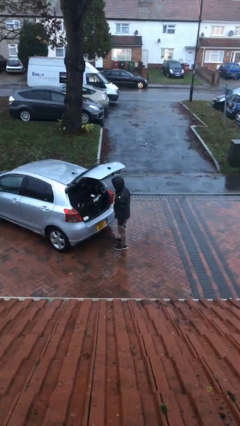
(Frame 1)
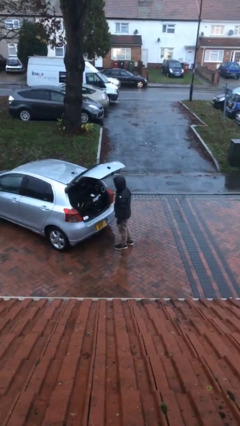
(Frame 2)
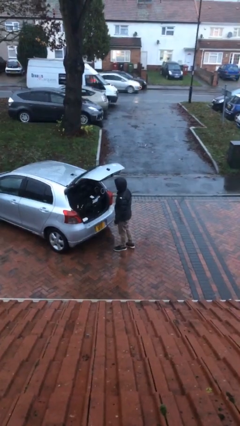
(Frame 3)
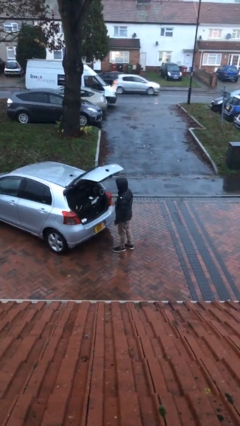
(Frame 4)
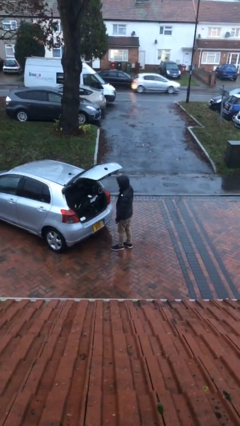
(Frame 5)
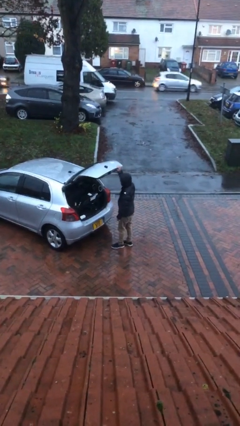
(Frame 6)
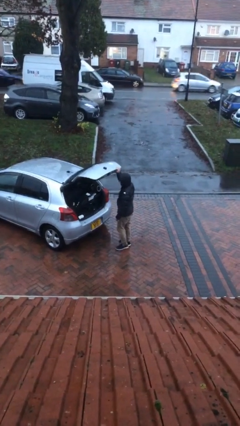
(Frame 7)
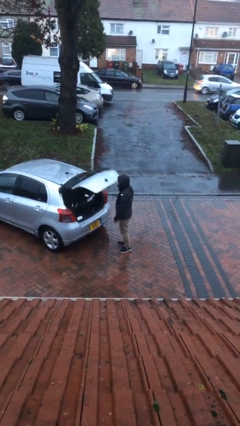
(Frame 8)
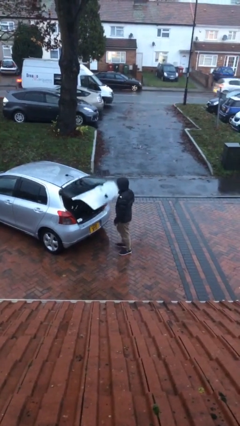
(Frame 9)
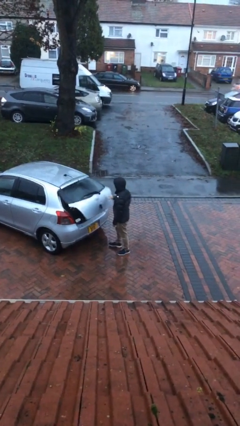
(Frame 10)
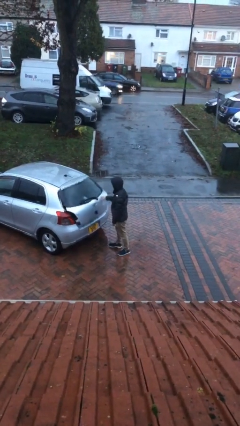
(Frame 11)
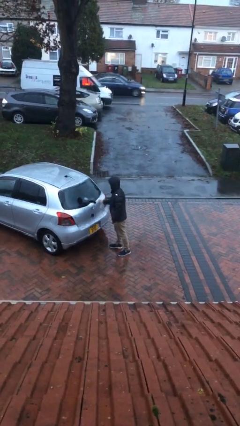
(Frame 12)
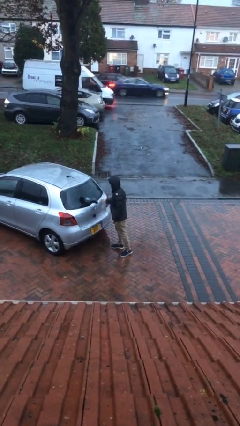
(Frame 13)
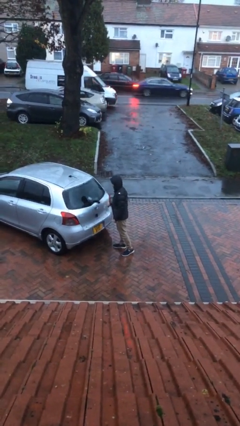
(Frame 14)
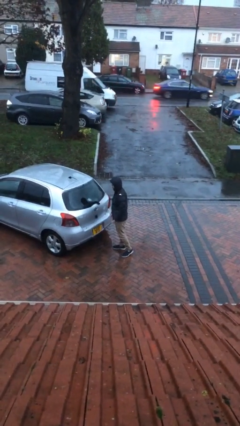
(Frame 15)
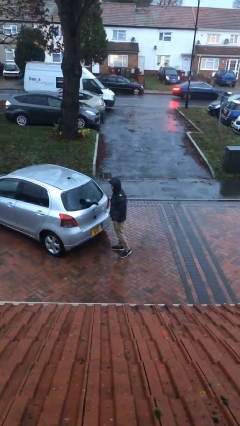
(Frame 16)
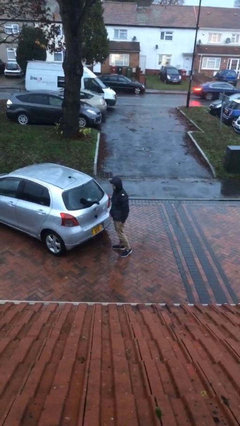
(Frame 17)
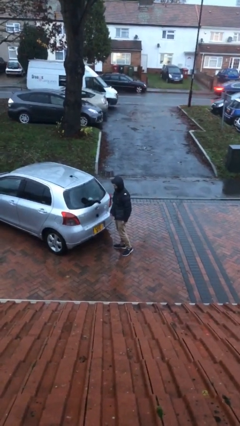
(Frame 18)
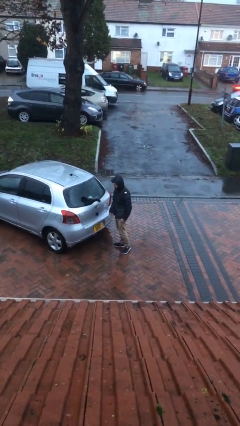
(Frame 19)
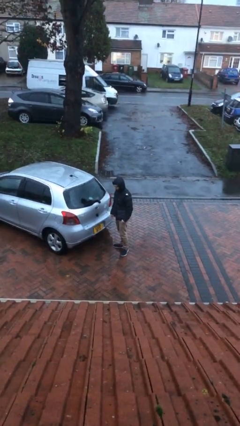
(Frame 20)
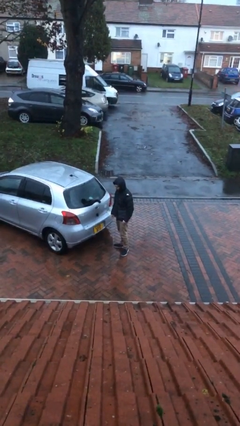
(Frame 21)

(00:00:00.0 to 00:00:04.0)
person closes car trunk

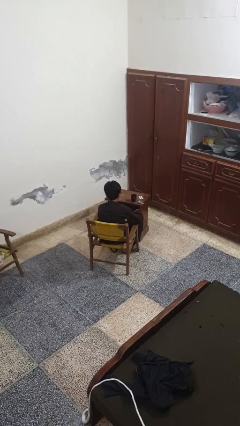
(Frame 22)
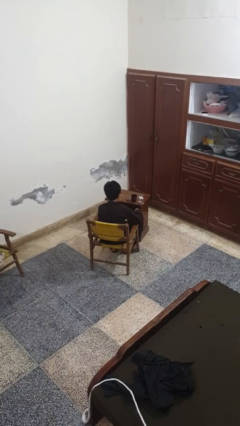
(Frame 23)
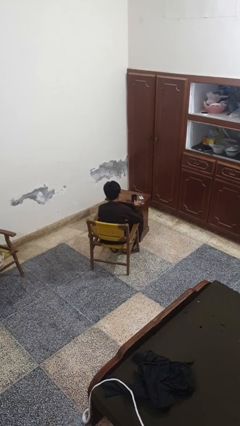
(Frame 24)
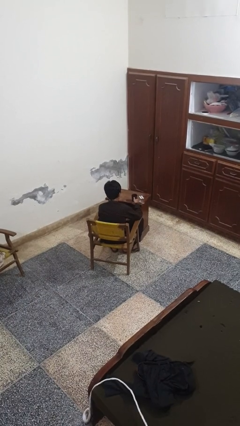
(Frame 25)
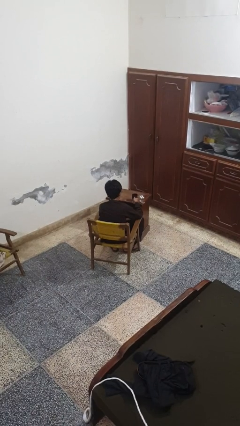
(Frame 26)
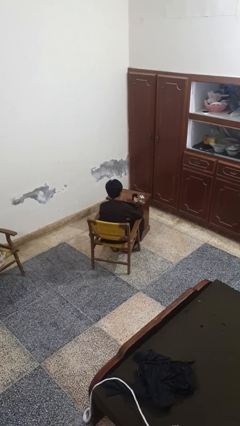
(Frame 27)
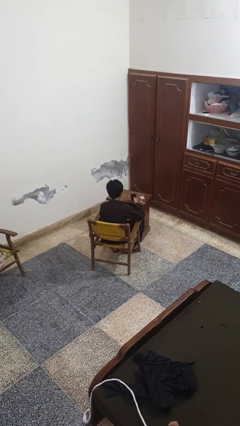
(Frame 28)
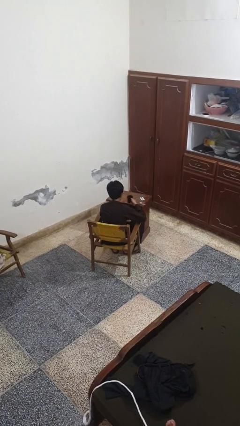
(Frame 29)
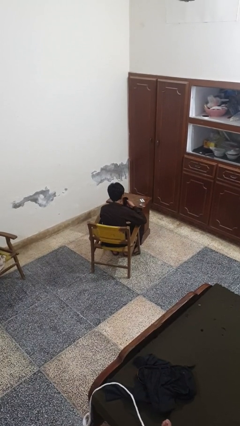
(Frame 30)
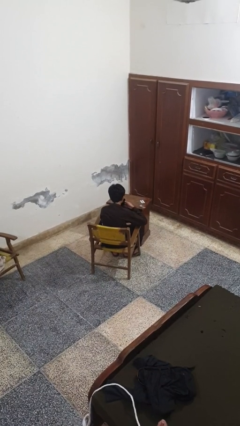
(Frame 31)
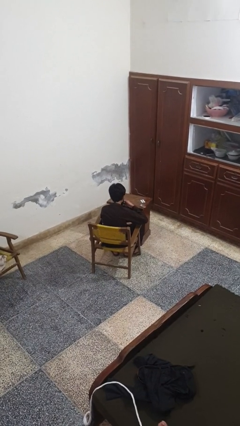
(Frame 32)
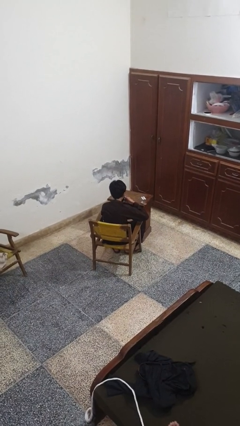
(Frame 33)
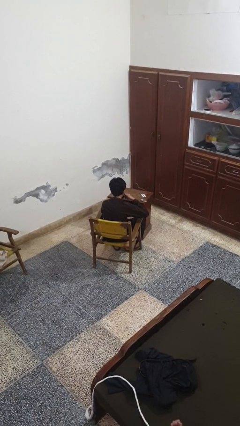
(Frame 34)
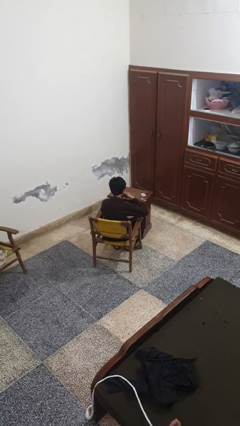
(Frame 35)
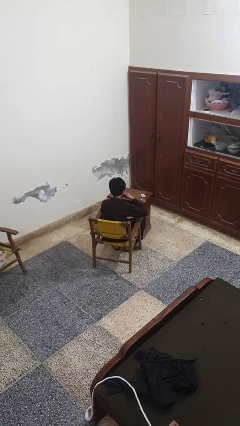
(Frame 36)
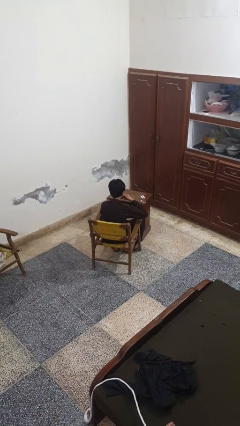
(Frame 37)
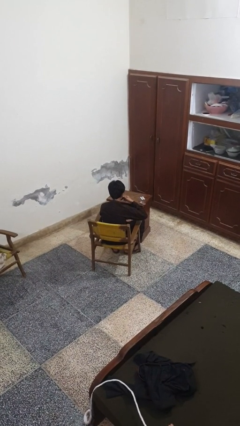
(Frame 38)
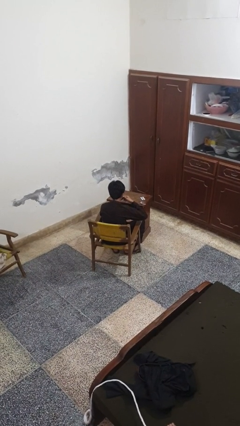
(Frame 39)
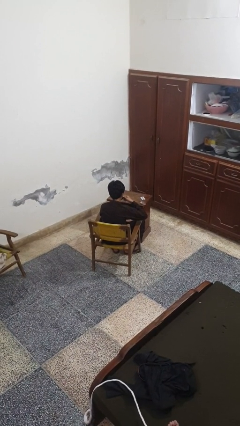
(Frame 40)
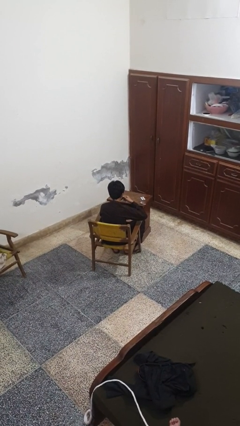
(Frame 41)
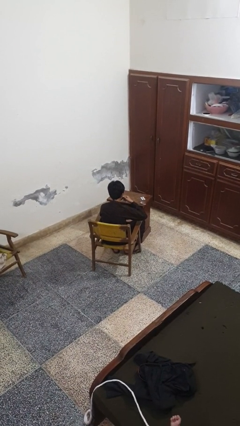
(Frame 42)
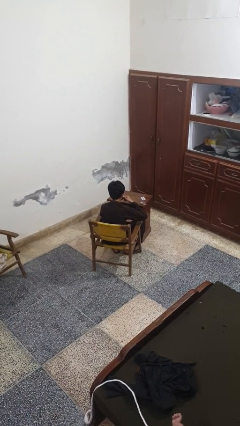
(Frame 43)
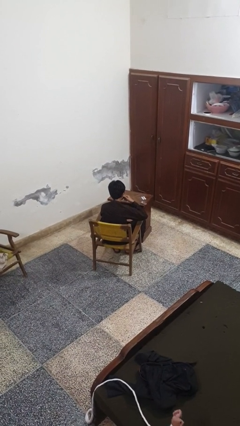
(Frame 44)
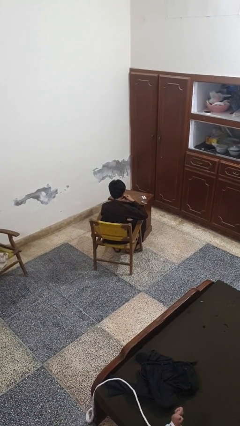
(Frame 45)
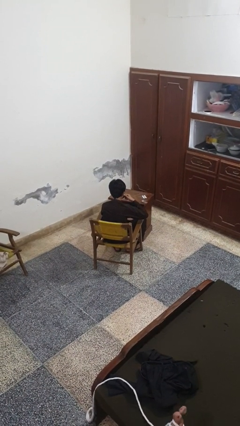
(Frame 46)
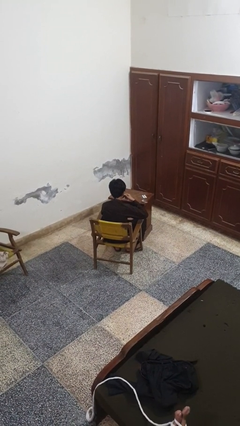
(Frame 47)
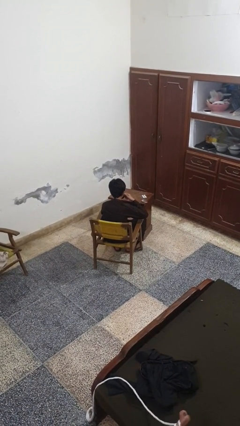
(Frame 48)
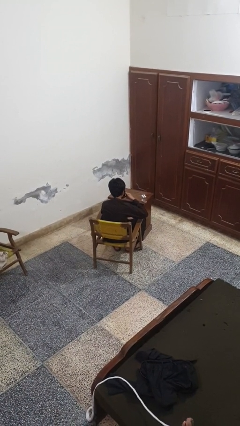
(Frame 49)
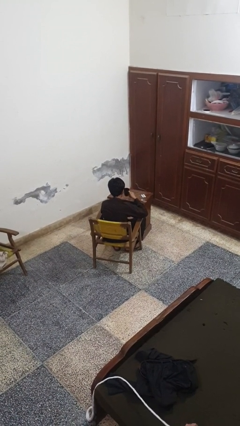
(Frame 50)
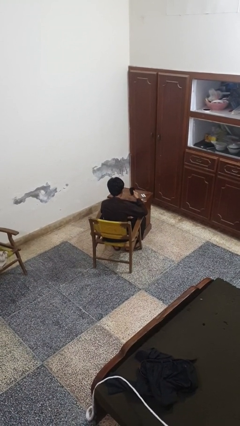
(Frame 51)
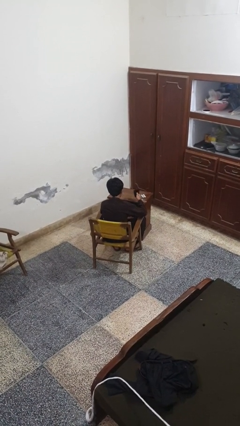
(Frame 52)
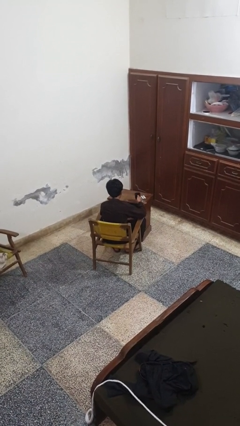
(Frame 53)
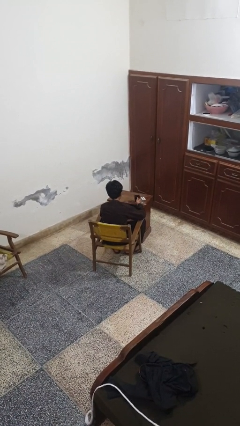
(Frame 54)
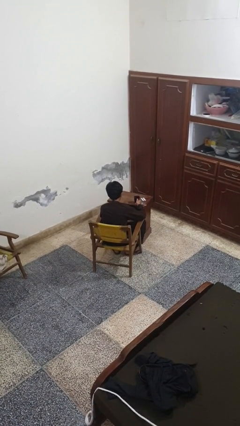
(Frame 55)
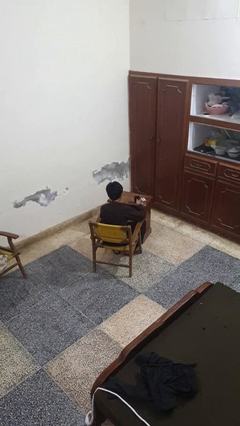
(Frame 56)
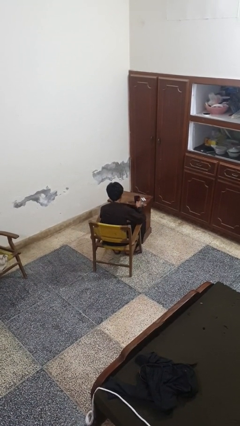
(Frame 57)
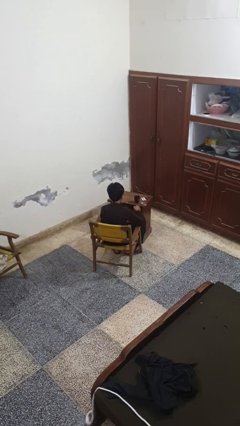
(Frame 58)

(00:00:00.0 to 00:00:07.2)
person drinks from cup

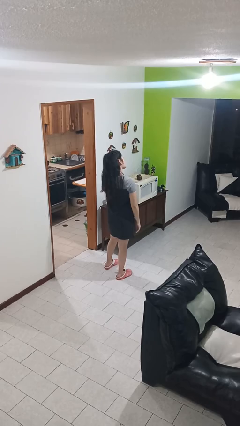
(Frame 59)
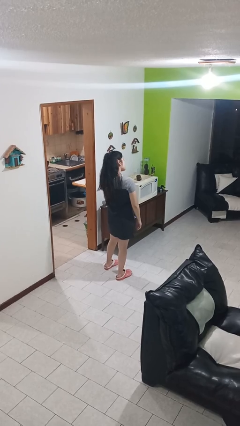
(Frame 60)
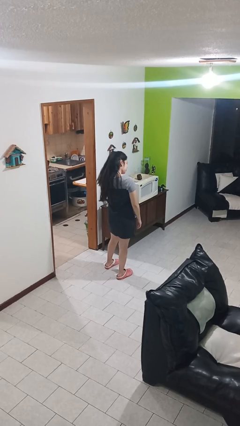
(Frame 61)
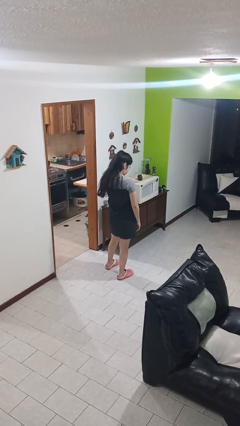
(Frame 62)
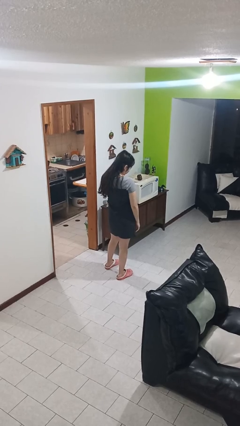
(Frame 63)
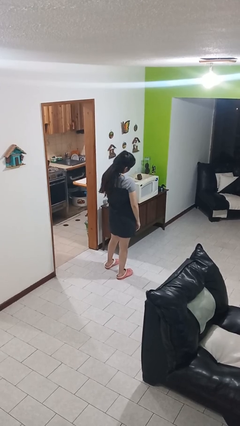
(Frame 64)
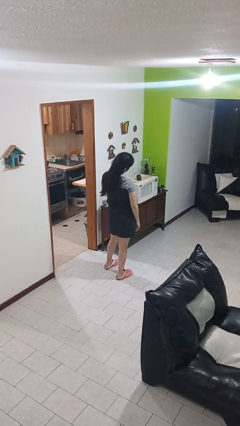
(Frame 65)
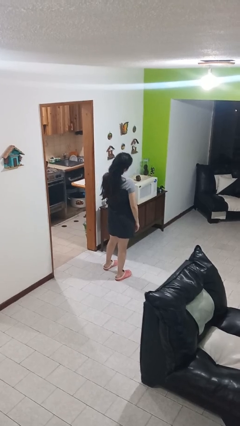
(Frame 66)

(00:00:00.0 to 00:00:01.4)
person rubs neck

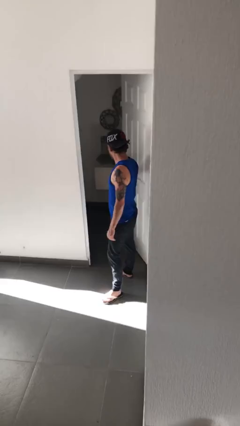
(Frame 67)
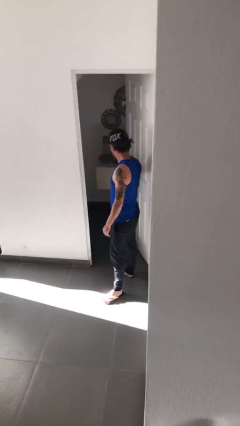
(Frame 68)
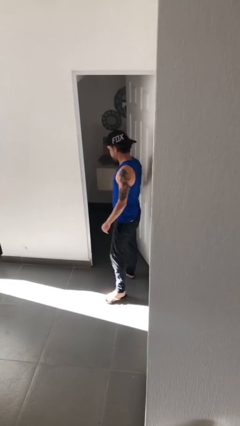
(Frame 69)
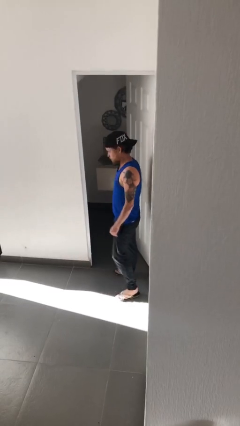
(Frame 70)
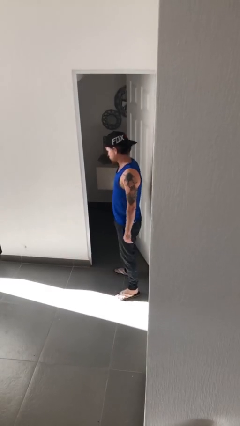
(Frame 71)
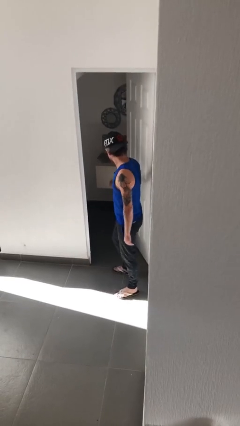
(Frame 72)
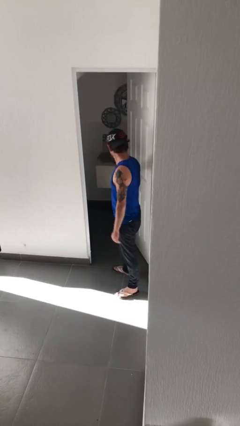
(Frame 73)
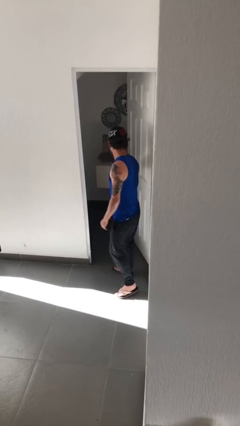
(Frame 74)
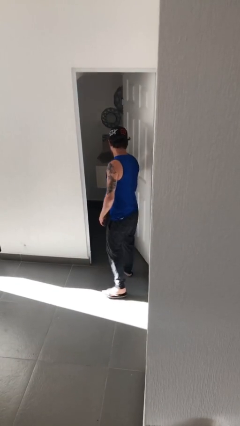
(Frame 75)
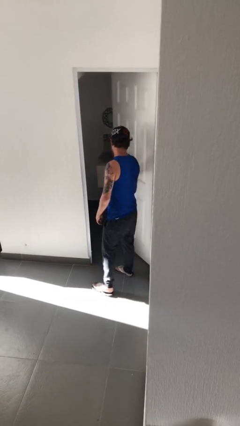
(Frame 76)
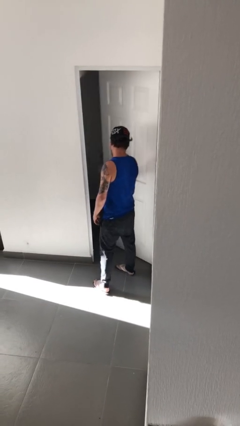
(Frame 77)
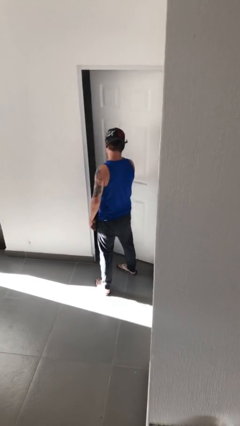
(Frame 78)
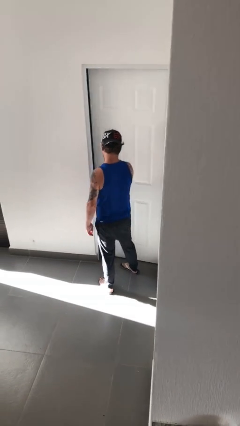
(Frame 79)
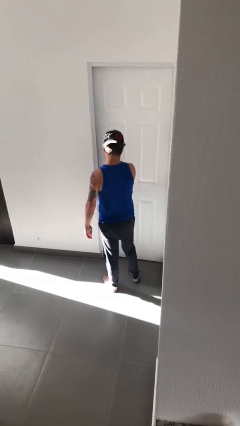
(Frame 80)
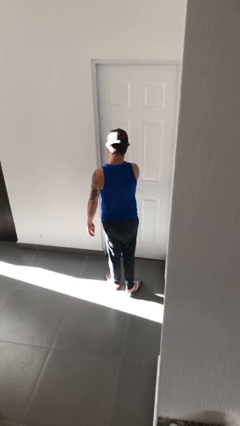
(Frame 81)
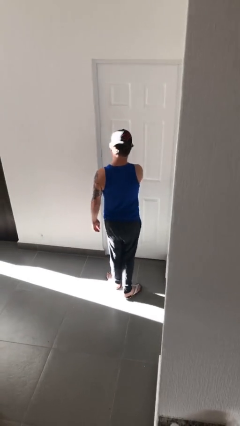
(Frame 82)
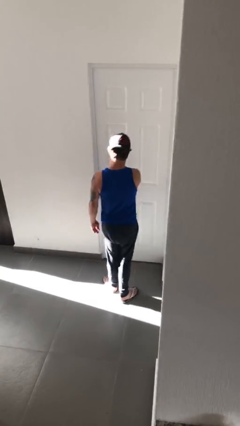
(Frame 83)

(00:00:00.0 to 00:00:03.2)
person closes facility door

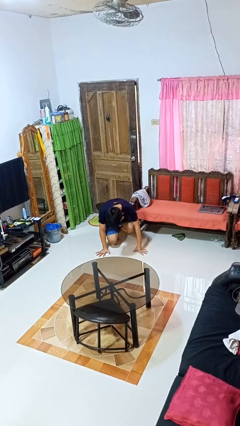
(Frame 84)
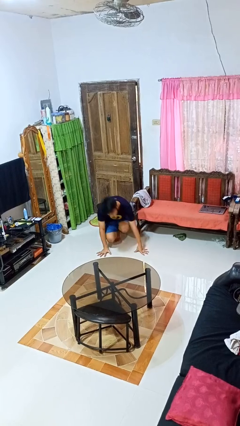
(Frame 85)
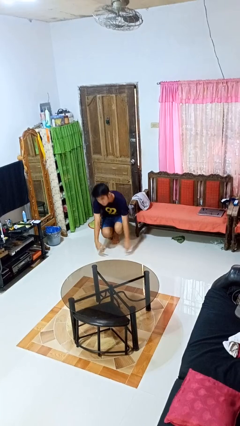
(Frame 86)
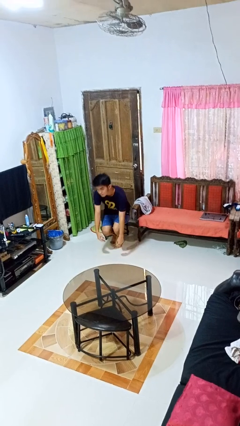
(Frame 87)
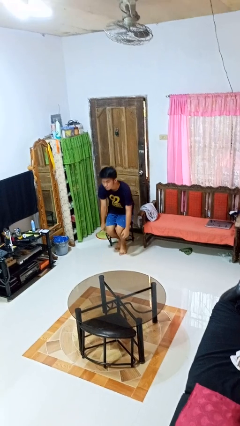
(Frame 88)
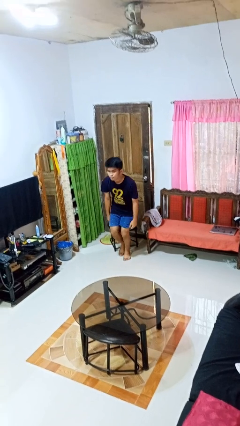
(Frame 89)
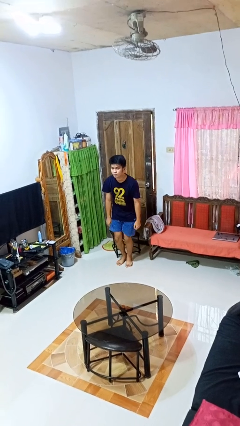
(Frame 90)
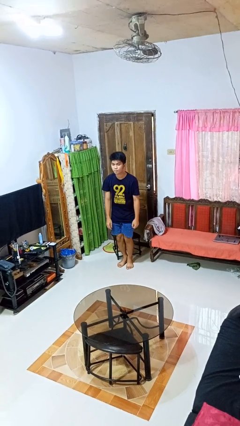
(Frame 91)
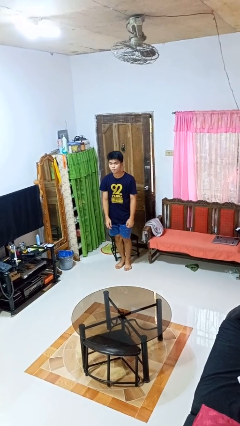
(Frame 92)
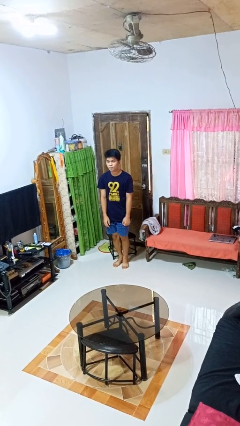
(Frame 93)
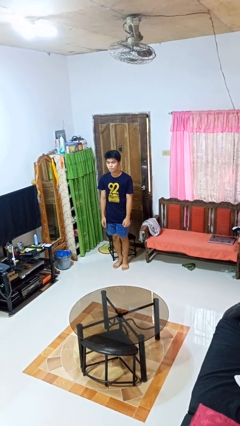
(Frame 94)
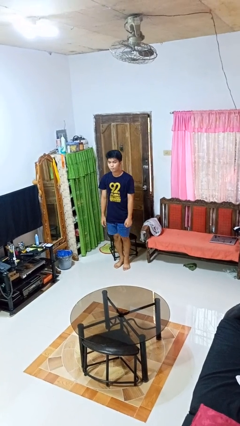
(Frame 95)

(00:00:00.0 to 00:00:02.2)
person stands up from floor
